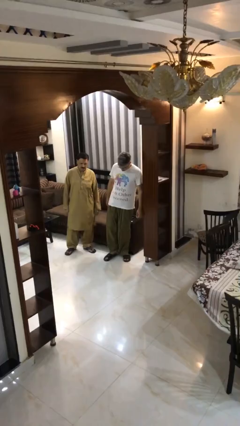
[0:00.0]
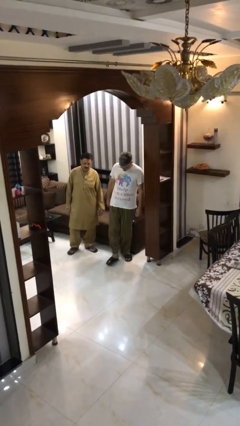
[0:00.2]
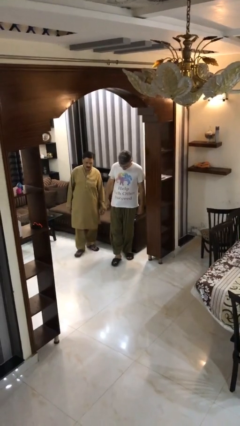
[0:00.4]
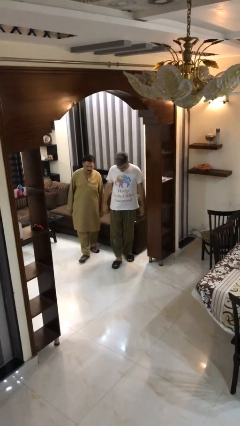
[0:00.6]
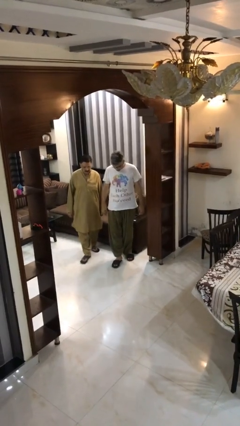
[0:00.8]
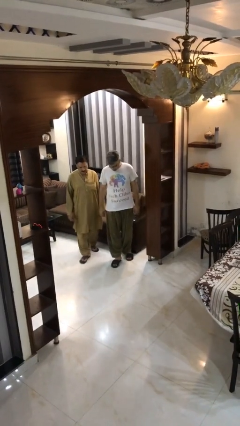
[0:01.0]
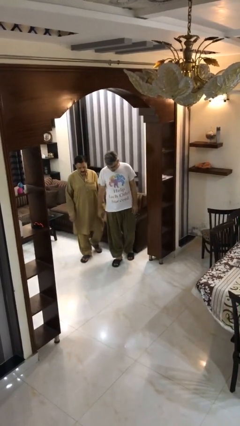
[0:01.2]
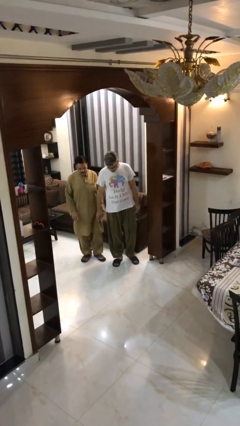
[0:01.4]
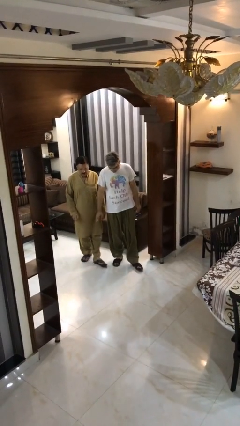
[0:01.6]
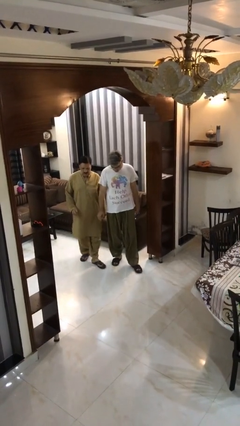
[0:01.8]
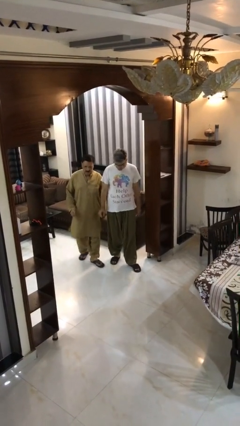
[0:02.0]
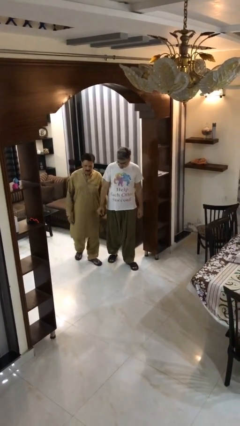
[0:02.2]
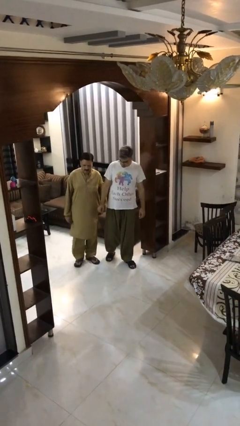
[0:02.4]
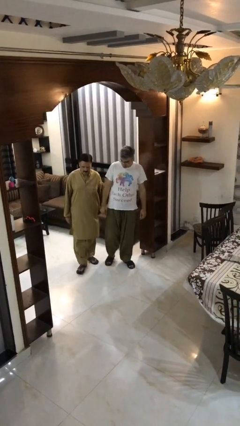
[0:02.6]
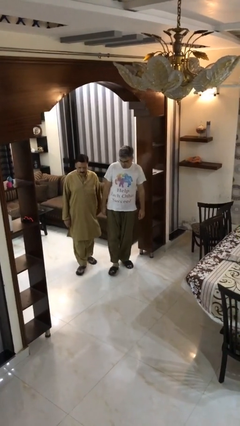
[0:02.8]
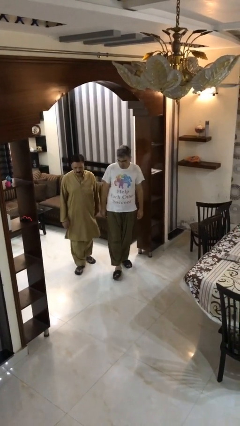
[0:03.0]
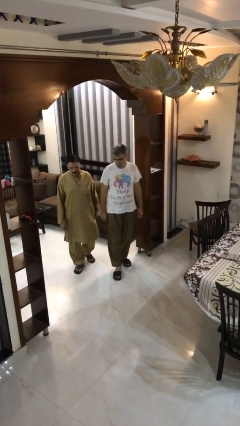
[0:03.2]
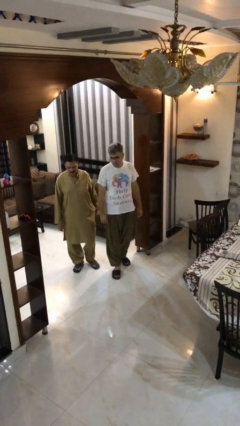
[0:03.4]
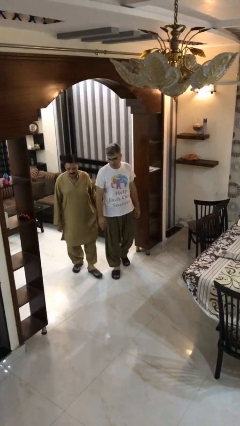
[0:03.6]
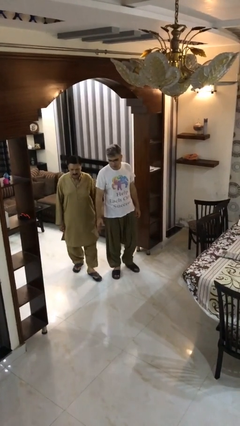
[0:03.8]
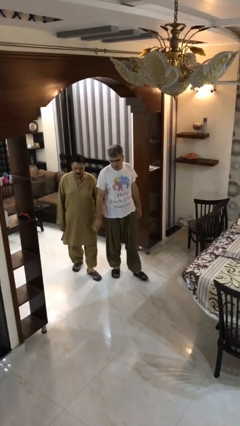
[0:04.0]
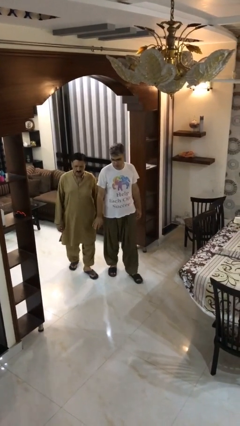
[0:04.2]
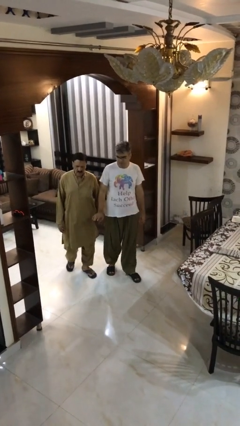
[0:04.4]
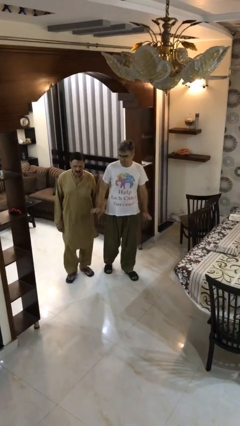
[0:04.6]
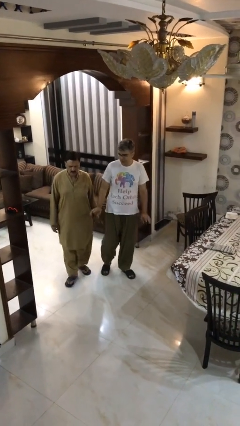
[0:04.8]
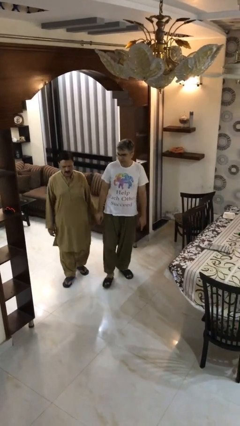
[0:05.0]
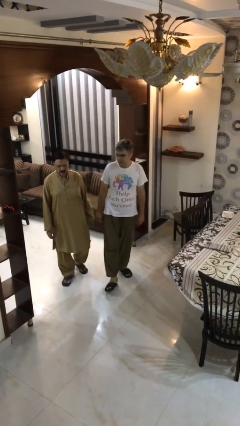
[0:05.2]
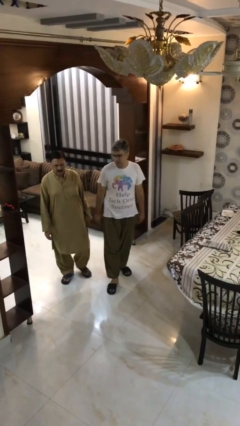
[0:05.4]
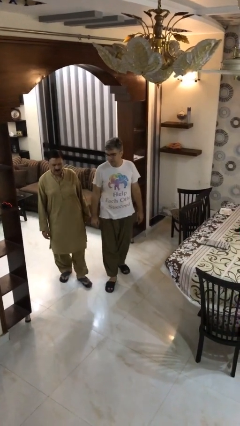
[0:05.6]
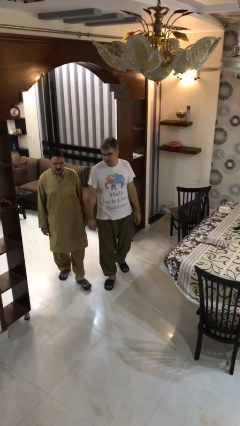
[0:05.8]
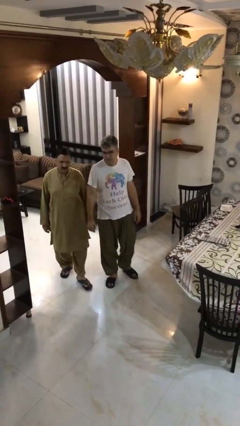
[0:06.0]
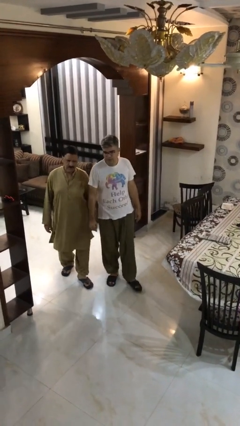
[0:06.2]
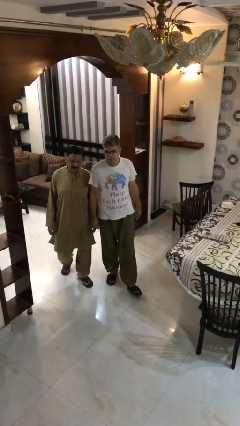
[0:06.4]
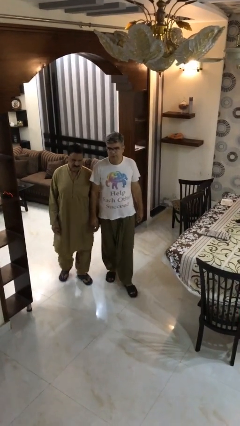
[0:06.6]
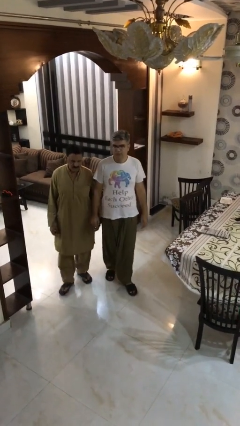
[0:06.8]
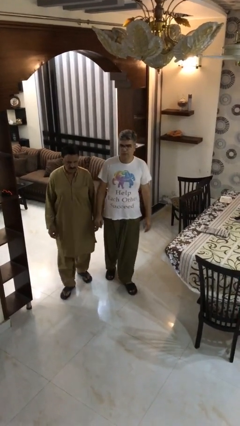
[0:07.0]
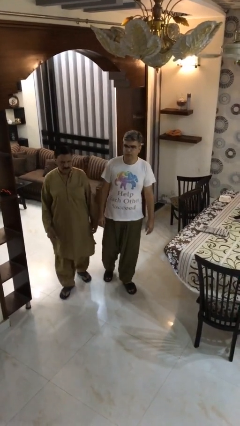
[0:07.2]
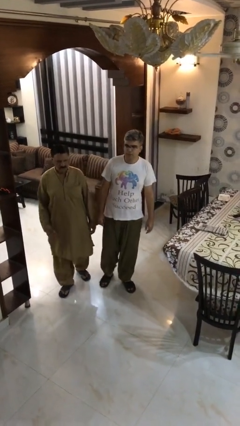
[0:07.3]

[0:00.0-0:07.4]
person talks to person

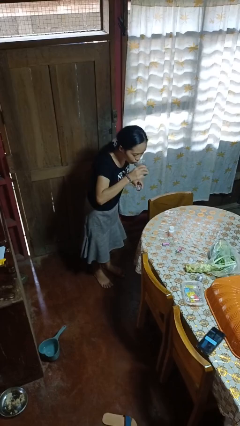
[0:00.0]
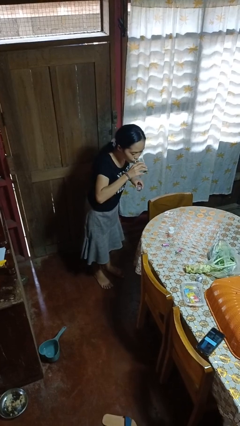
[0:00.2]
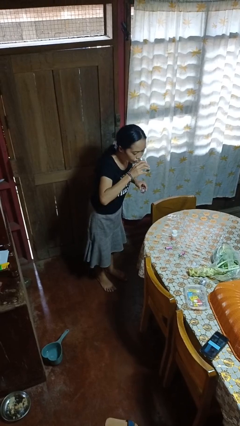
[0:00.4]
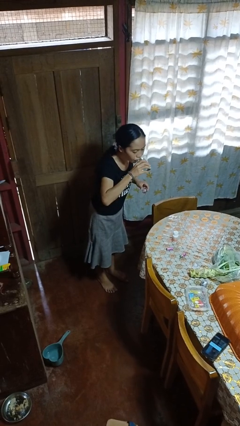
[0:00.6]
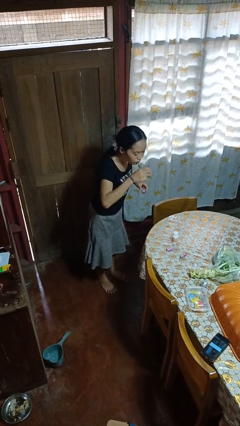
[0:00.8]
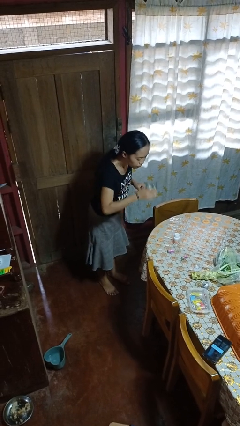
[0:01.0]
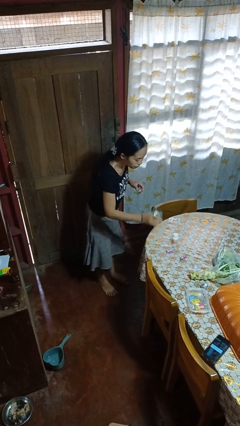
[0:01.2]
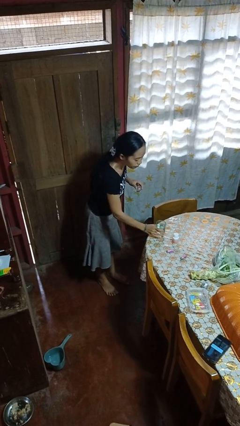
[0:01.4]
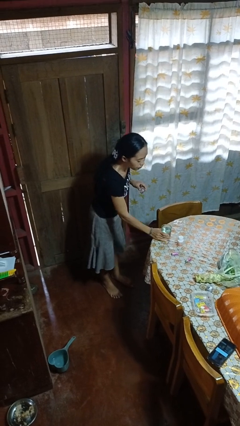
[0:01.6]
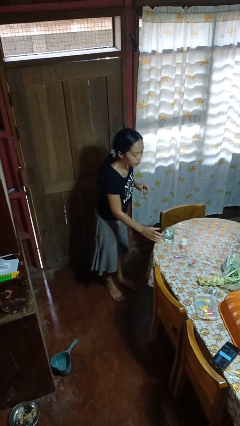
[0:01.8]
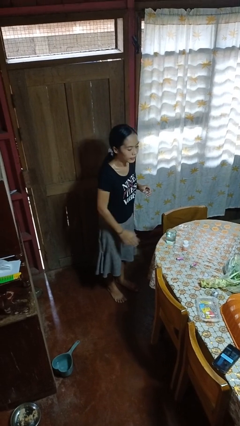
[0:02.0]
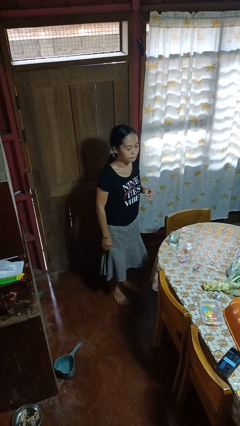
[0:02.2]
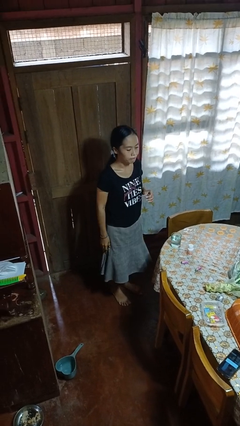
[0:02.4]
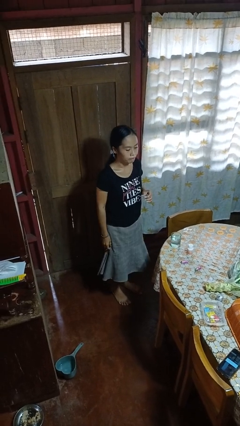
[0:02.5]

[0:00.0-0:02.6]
person drinks from cup

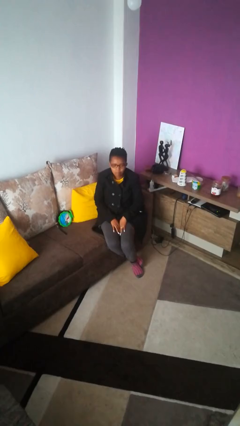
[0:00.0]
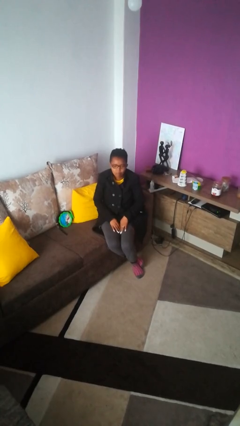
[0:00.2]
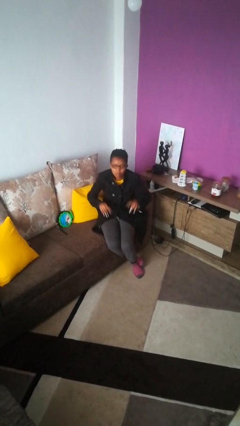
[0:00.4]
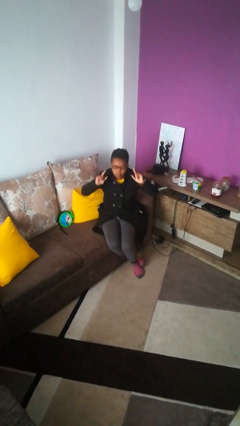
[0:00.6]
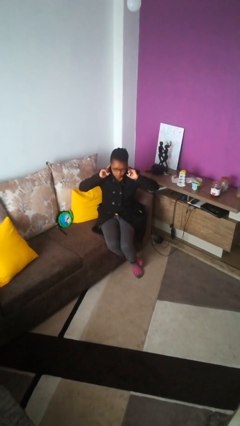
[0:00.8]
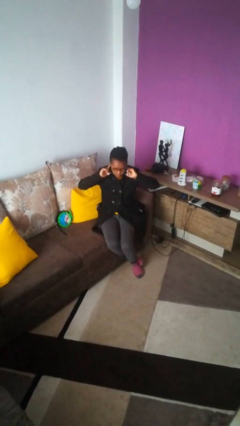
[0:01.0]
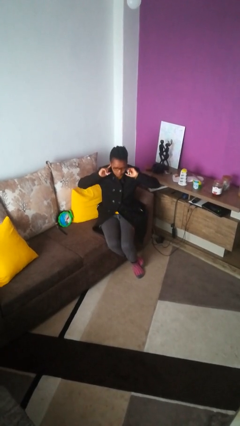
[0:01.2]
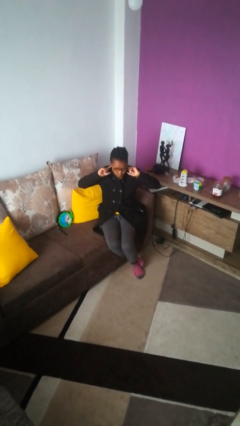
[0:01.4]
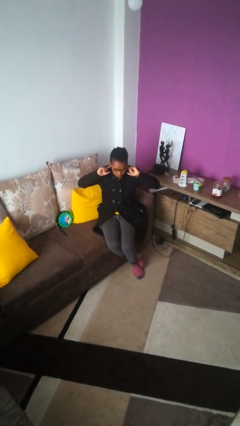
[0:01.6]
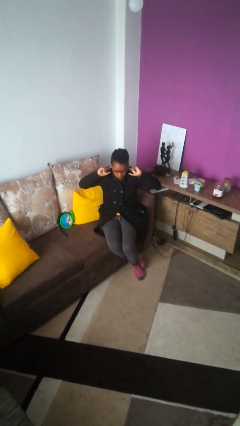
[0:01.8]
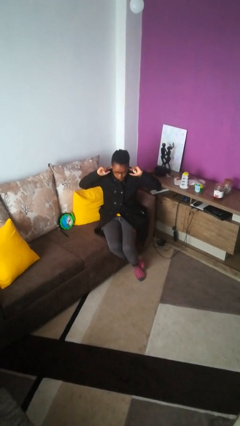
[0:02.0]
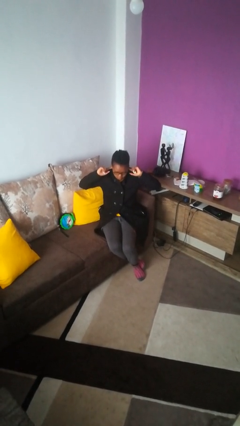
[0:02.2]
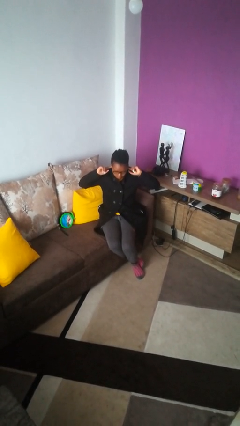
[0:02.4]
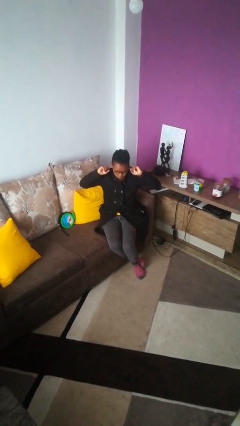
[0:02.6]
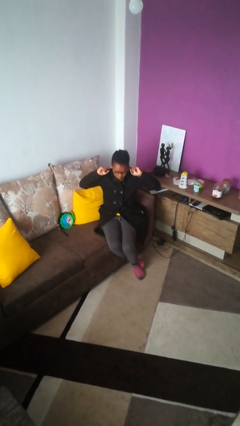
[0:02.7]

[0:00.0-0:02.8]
person puts fingers in ear

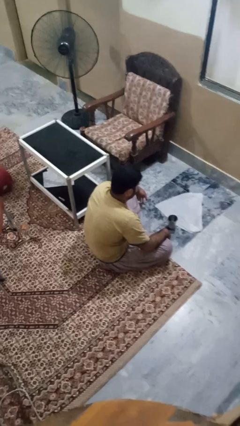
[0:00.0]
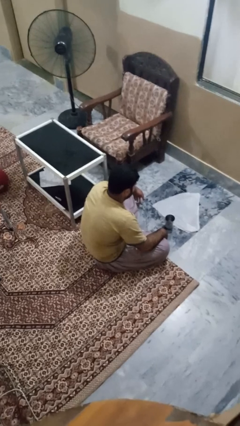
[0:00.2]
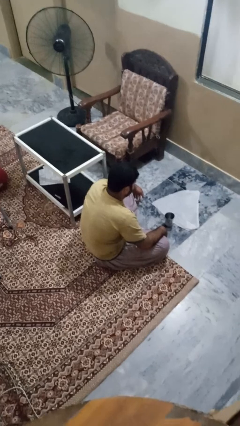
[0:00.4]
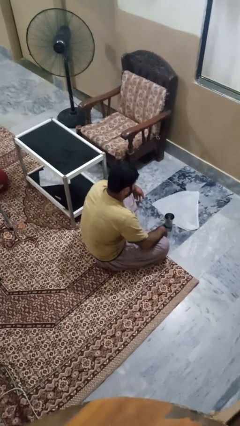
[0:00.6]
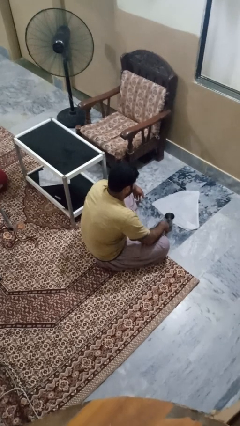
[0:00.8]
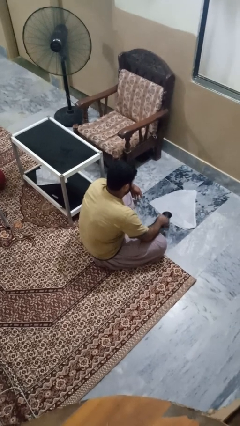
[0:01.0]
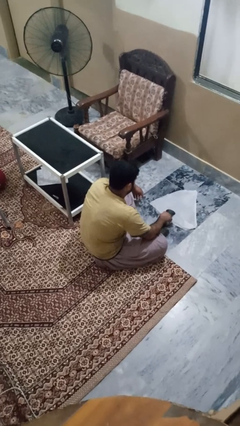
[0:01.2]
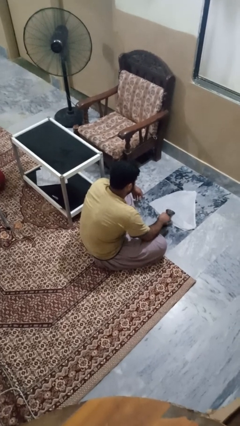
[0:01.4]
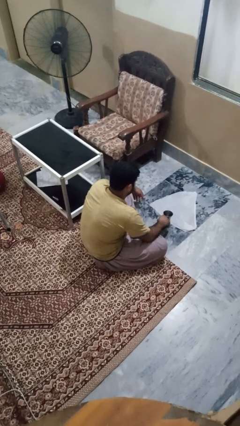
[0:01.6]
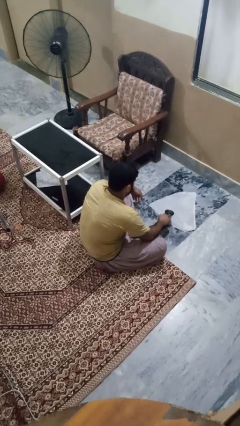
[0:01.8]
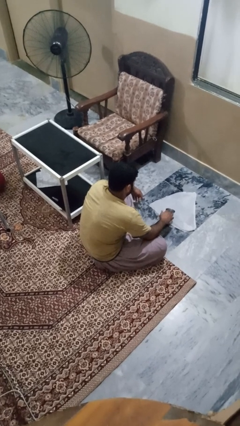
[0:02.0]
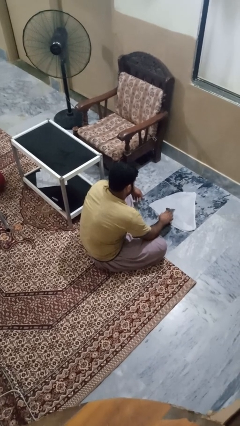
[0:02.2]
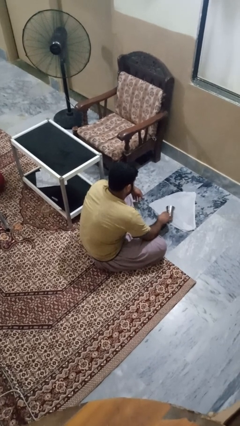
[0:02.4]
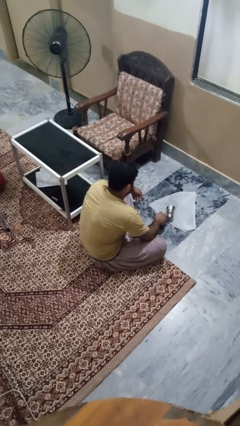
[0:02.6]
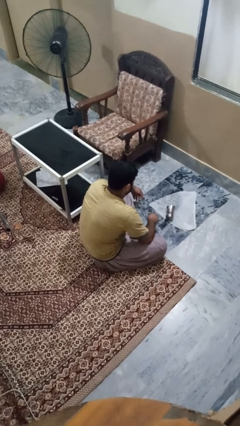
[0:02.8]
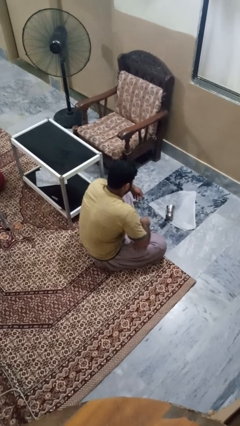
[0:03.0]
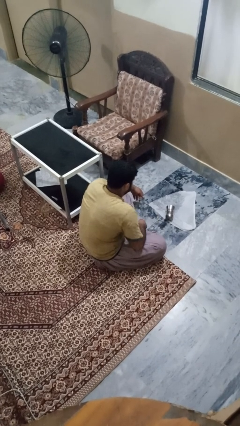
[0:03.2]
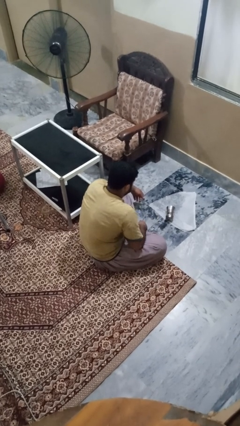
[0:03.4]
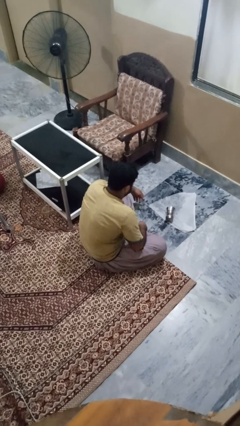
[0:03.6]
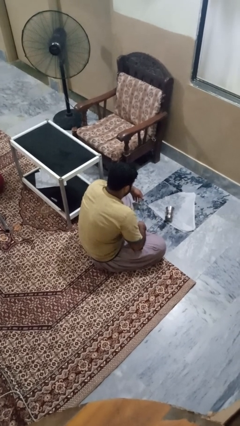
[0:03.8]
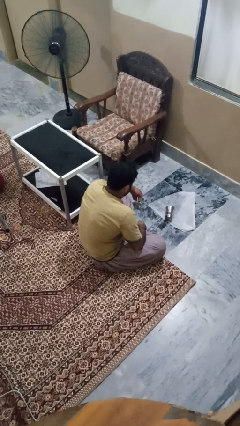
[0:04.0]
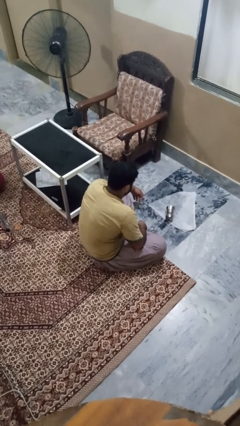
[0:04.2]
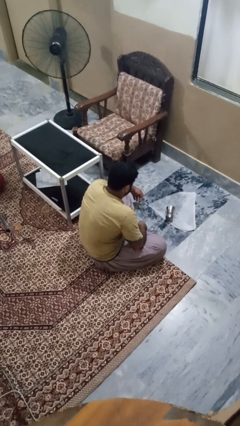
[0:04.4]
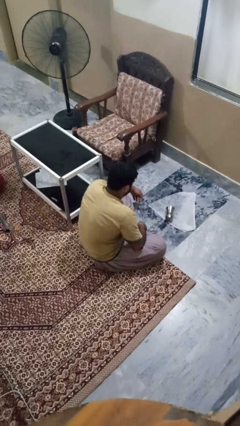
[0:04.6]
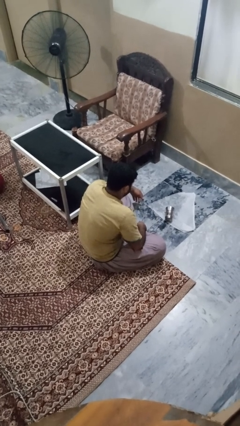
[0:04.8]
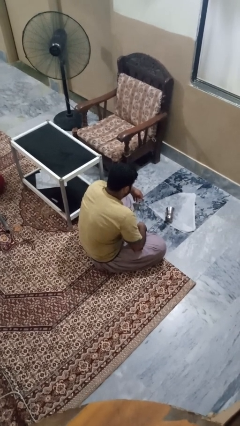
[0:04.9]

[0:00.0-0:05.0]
person spills on floor

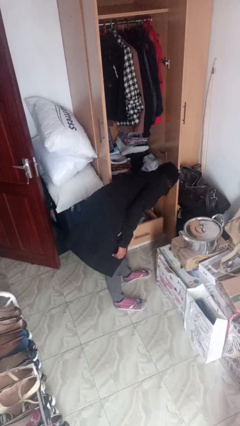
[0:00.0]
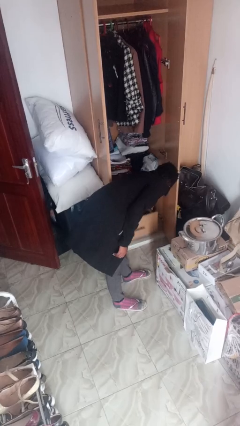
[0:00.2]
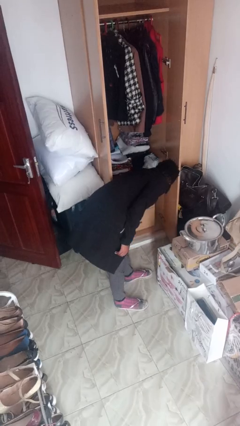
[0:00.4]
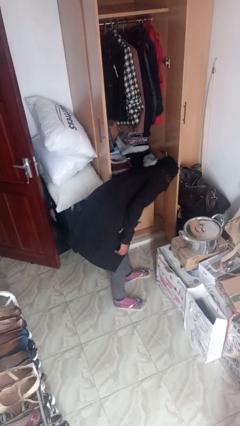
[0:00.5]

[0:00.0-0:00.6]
person closes dresser drawer
